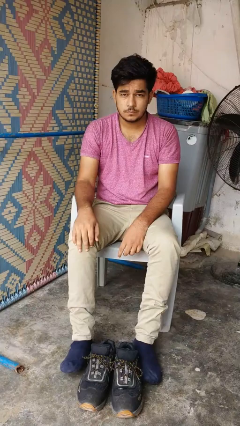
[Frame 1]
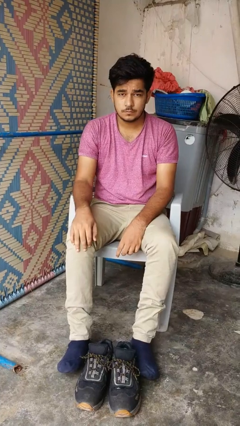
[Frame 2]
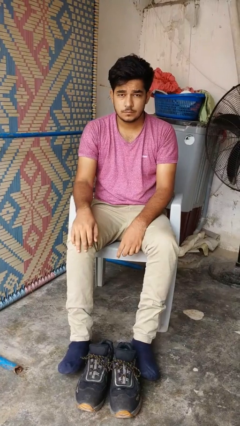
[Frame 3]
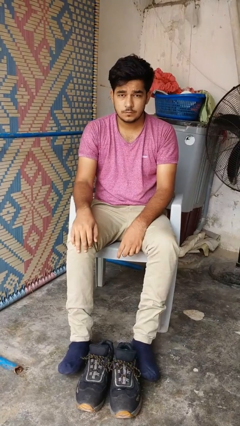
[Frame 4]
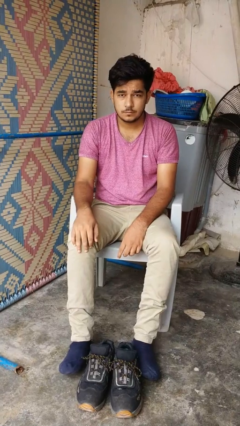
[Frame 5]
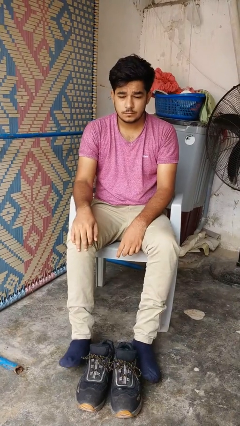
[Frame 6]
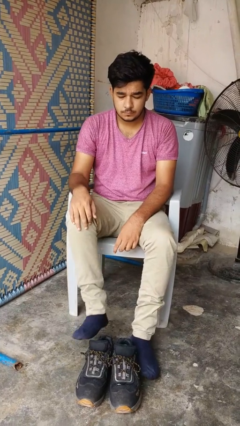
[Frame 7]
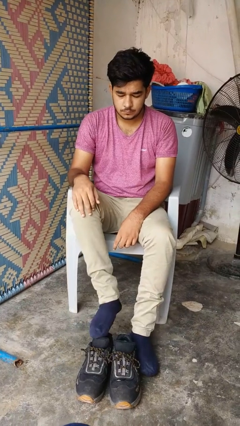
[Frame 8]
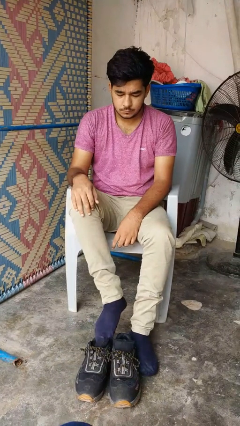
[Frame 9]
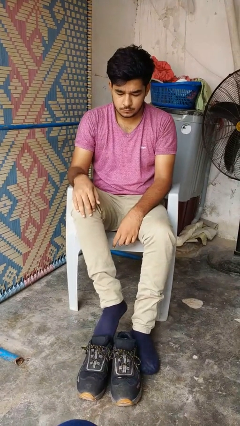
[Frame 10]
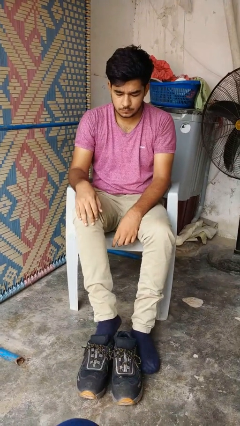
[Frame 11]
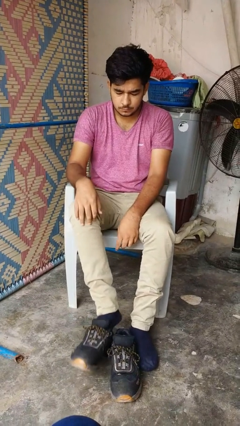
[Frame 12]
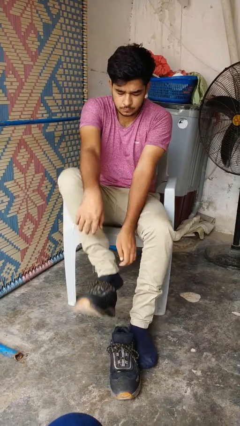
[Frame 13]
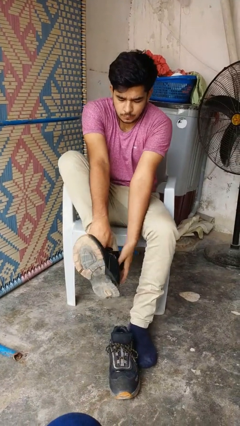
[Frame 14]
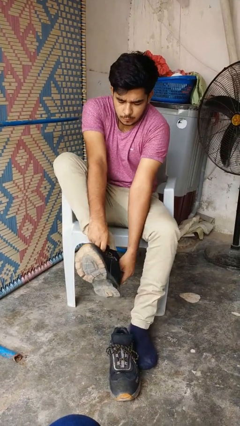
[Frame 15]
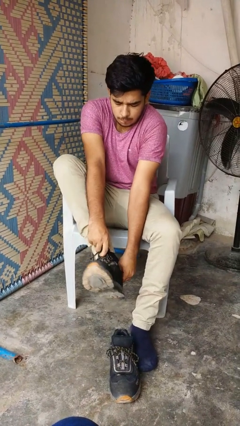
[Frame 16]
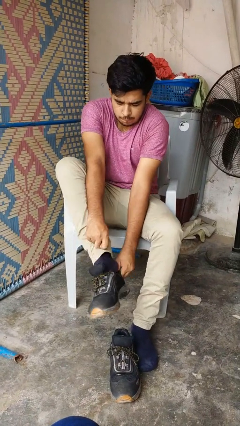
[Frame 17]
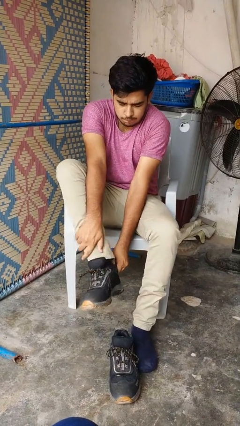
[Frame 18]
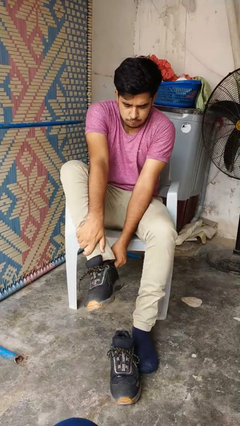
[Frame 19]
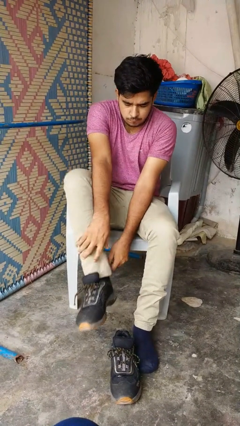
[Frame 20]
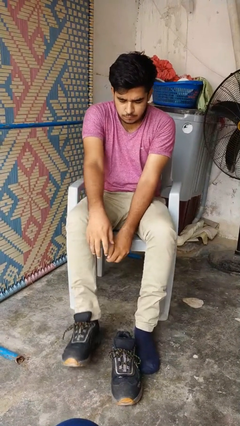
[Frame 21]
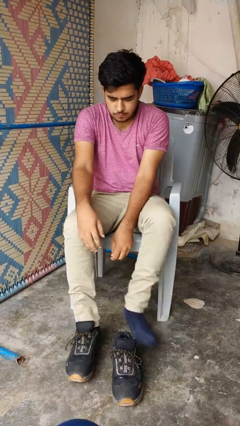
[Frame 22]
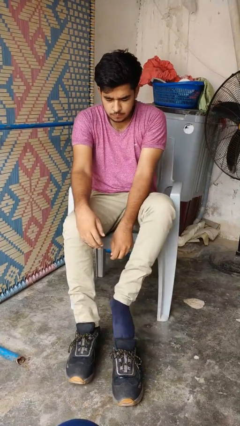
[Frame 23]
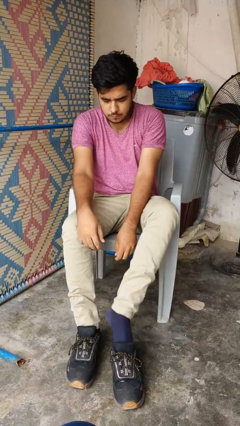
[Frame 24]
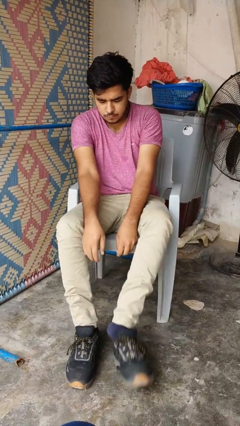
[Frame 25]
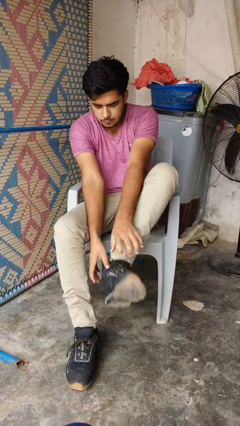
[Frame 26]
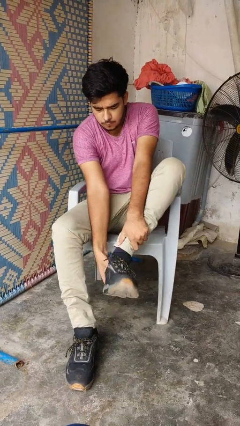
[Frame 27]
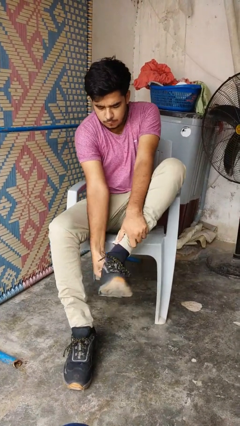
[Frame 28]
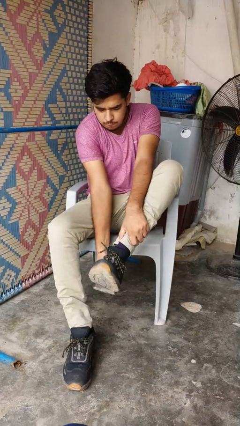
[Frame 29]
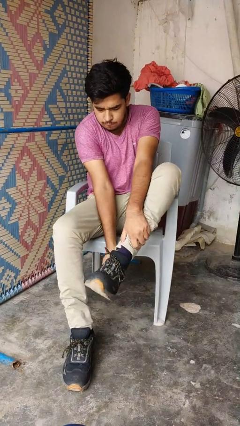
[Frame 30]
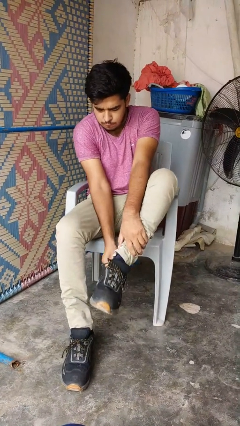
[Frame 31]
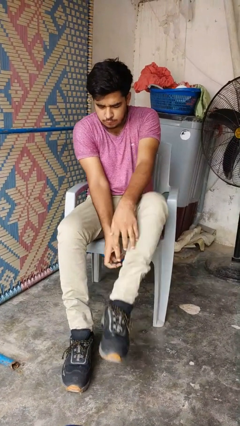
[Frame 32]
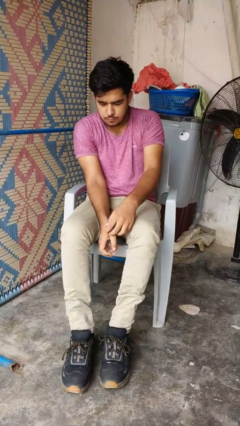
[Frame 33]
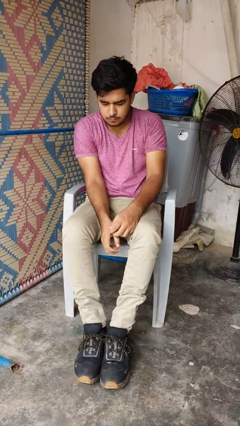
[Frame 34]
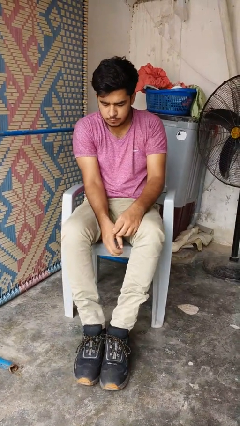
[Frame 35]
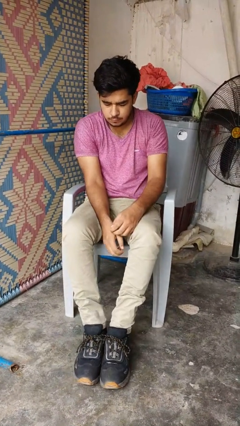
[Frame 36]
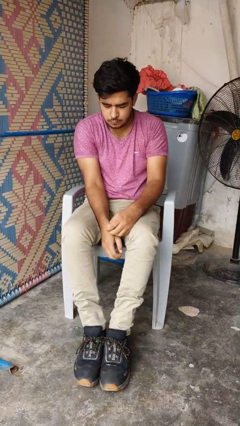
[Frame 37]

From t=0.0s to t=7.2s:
person puts on boots

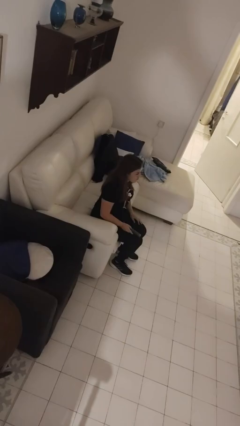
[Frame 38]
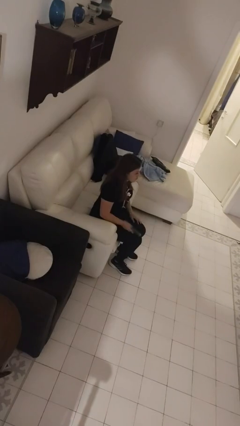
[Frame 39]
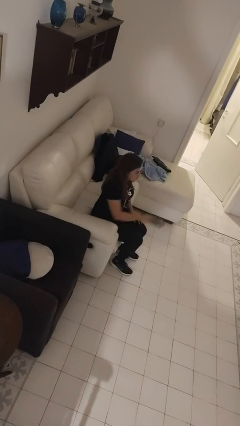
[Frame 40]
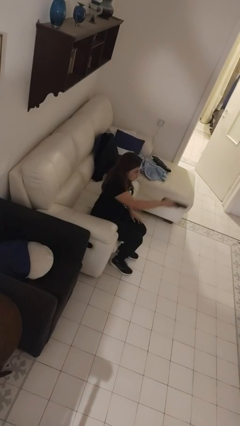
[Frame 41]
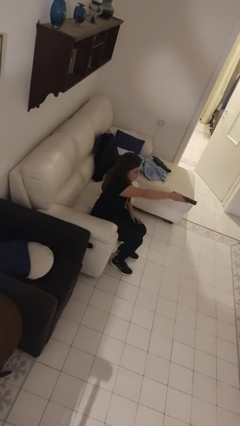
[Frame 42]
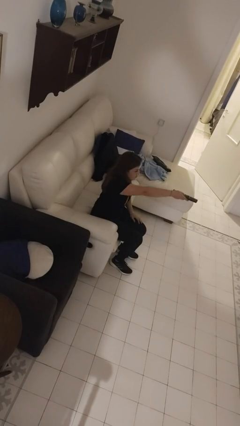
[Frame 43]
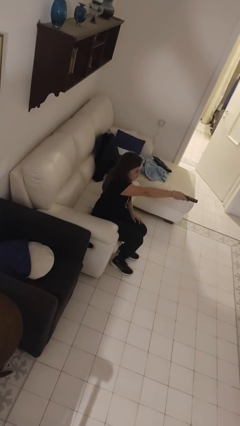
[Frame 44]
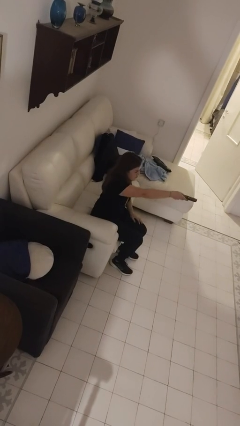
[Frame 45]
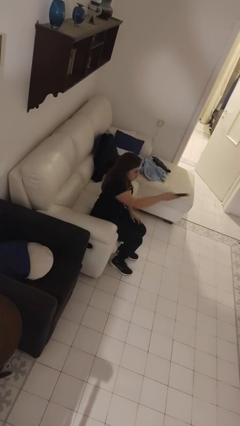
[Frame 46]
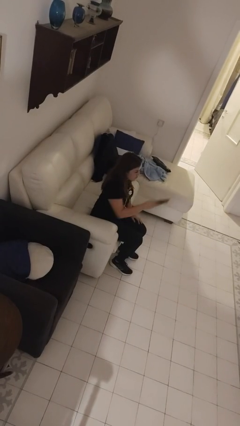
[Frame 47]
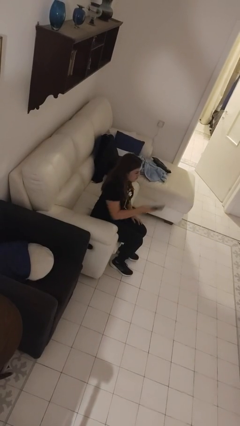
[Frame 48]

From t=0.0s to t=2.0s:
person uses television remote

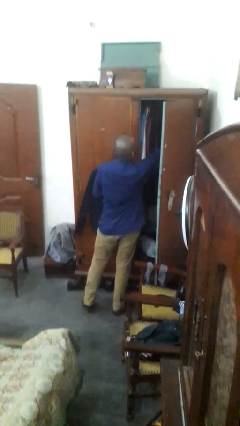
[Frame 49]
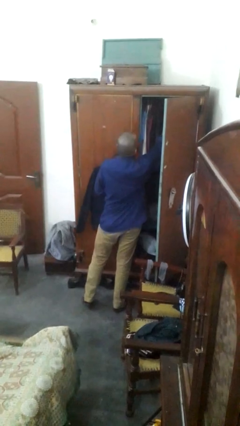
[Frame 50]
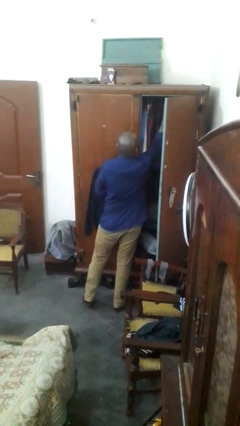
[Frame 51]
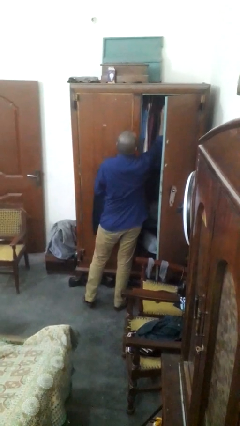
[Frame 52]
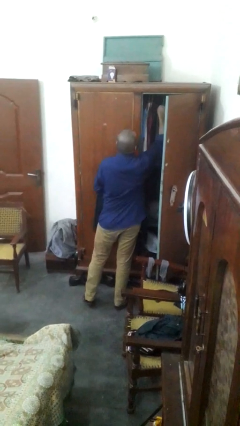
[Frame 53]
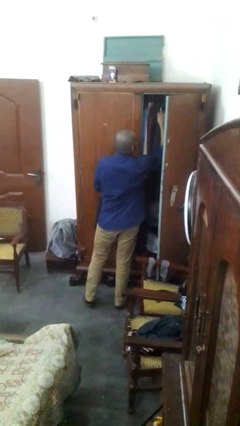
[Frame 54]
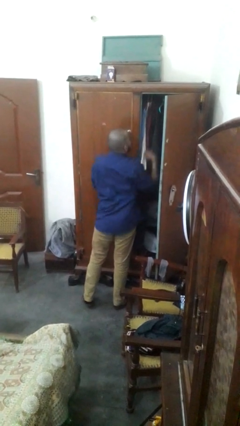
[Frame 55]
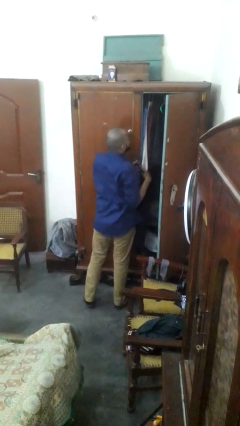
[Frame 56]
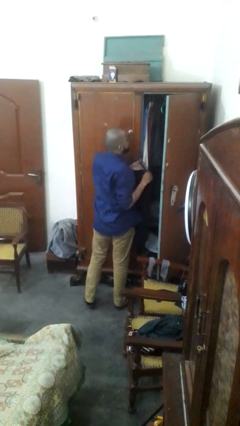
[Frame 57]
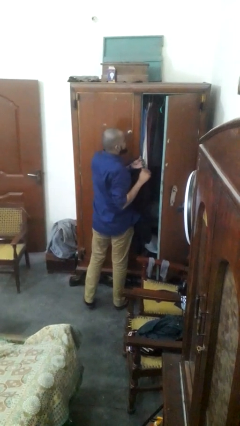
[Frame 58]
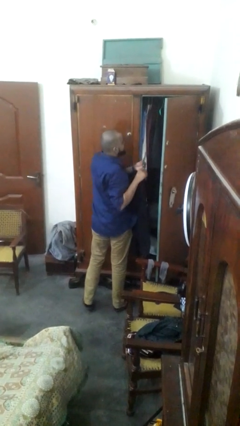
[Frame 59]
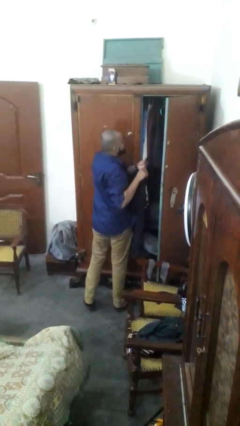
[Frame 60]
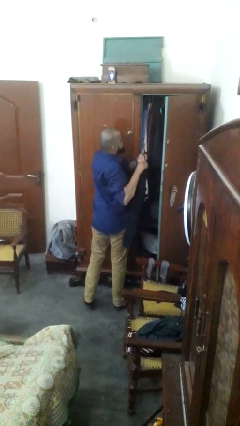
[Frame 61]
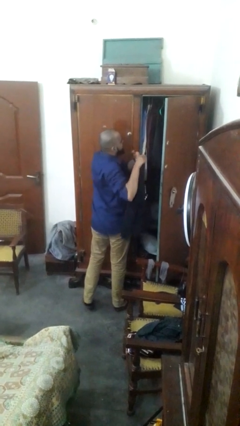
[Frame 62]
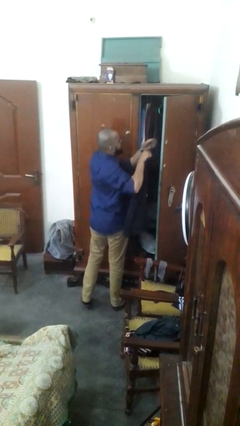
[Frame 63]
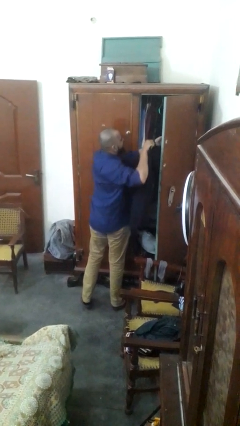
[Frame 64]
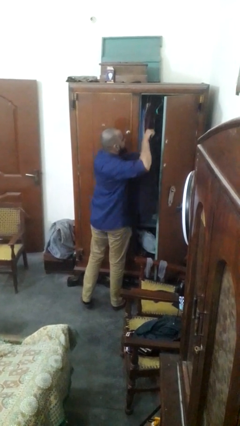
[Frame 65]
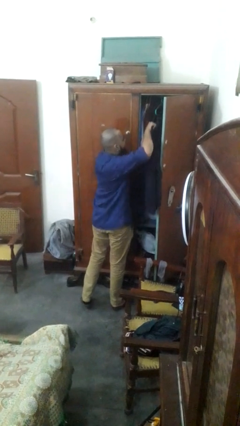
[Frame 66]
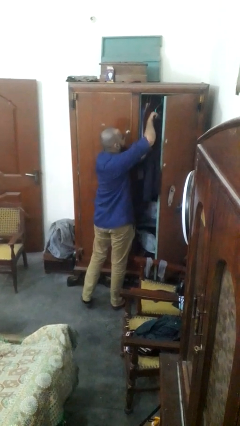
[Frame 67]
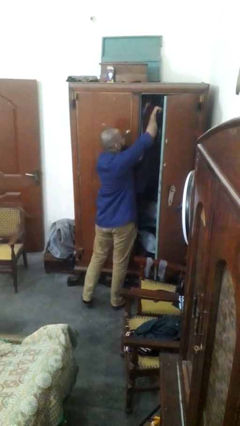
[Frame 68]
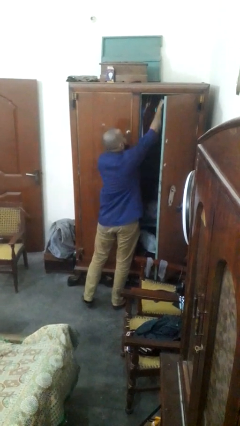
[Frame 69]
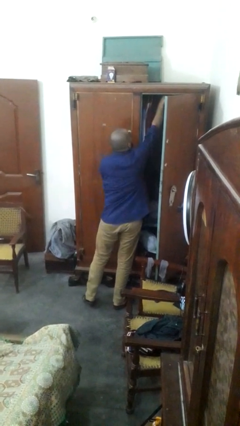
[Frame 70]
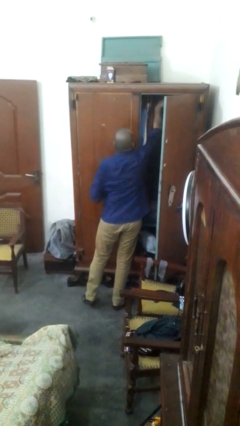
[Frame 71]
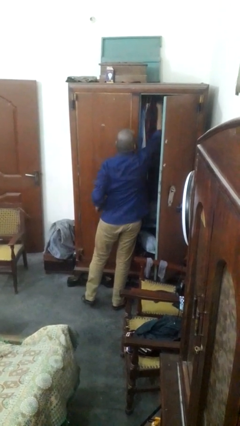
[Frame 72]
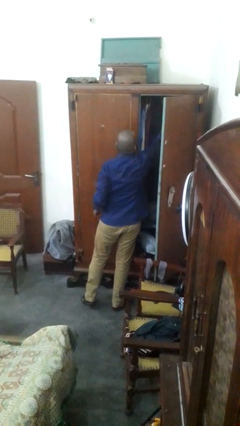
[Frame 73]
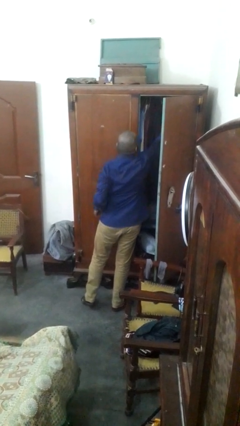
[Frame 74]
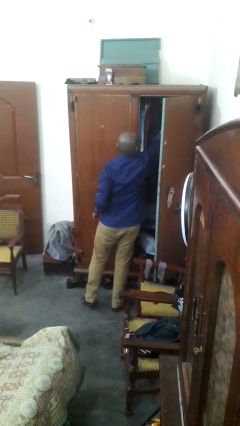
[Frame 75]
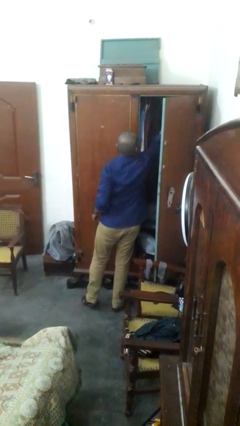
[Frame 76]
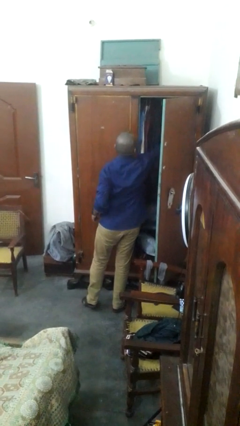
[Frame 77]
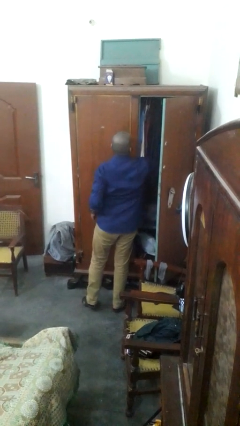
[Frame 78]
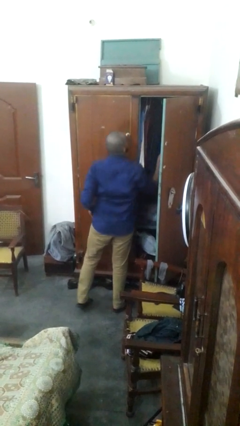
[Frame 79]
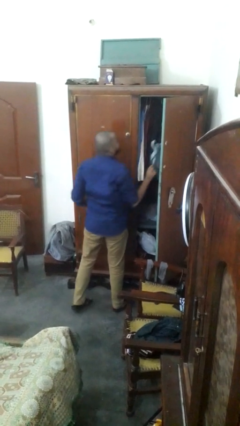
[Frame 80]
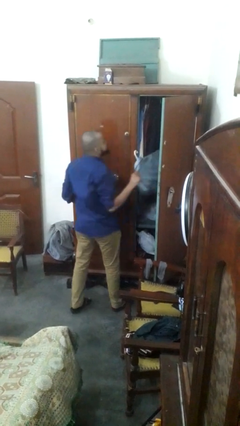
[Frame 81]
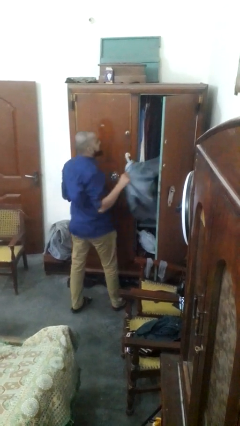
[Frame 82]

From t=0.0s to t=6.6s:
person puts clothes into closet

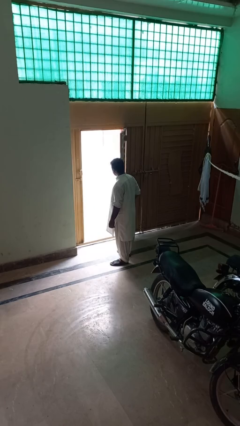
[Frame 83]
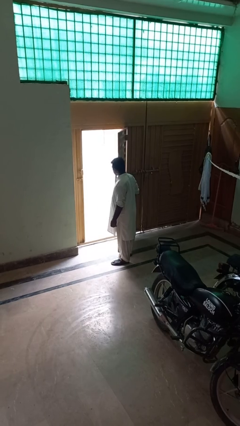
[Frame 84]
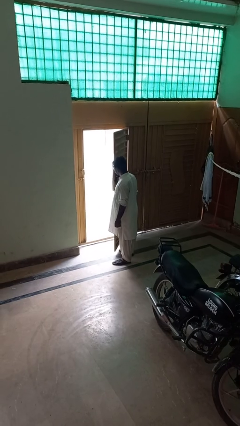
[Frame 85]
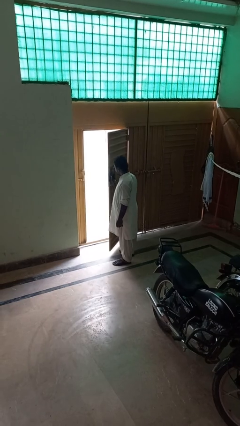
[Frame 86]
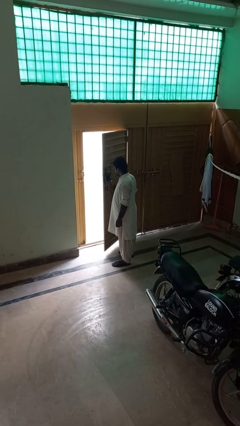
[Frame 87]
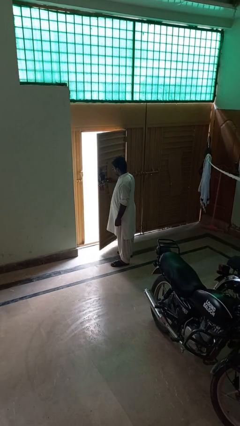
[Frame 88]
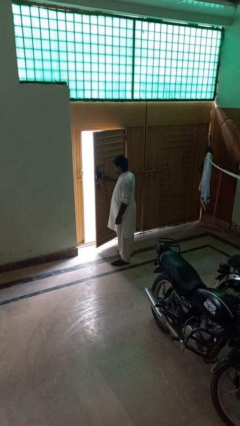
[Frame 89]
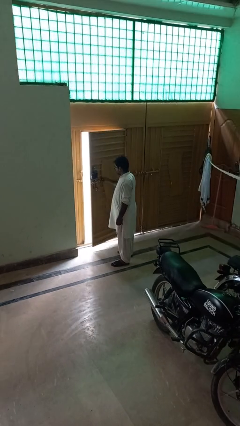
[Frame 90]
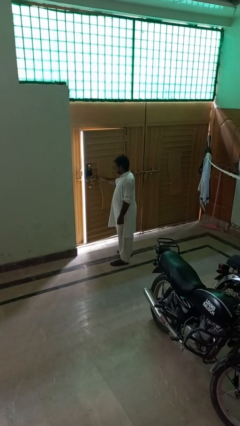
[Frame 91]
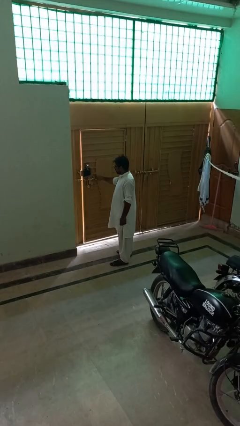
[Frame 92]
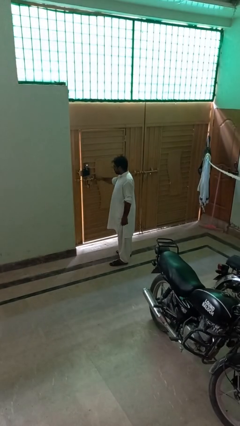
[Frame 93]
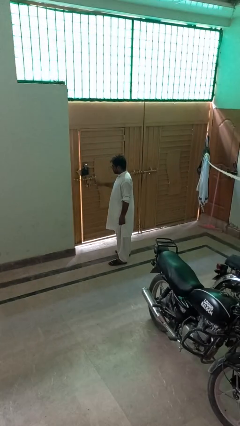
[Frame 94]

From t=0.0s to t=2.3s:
person closes gate
